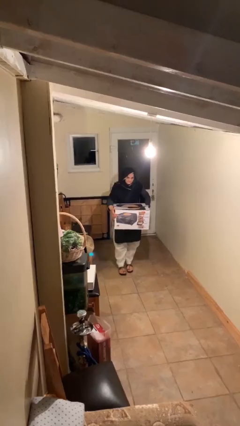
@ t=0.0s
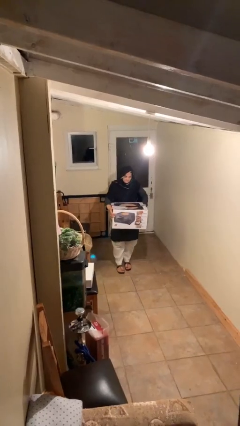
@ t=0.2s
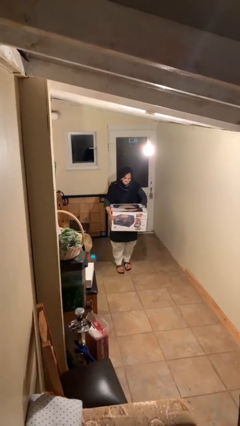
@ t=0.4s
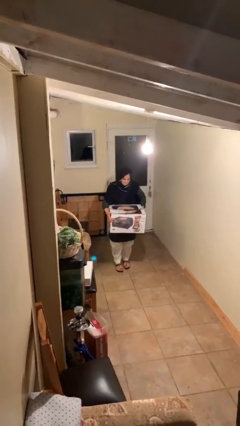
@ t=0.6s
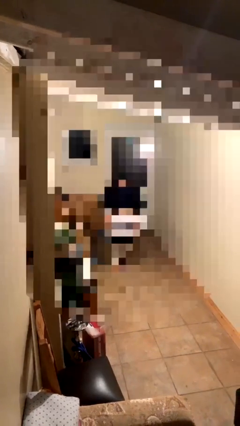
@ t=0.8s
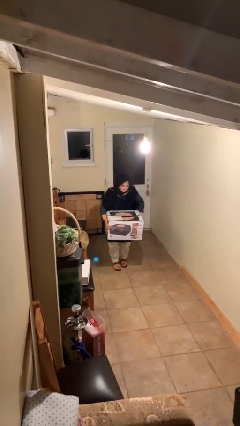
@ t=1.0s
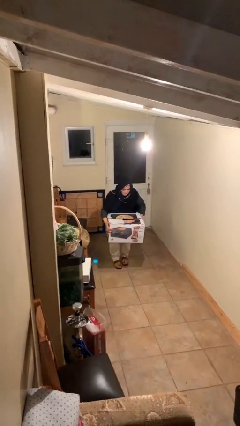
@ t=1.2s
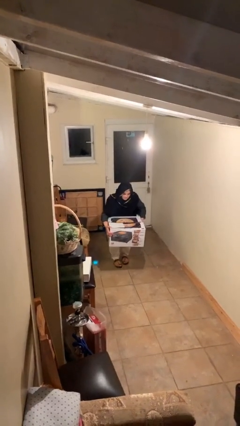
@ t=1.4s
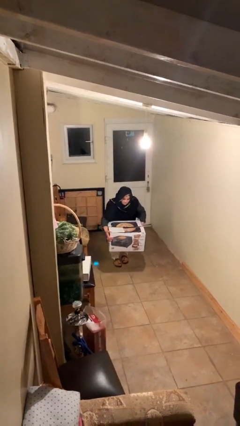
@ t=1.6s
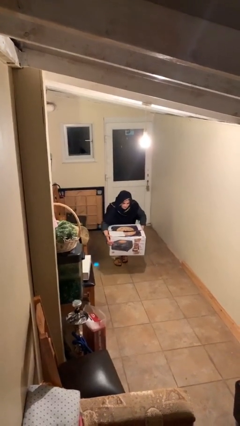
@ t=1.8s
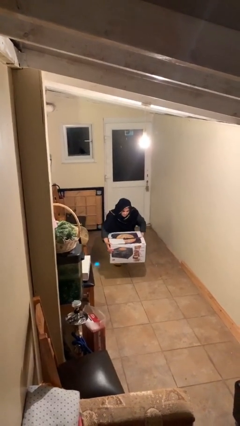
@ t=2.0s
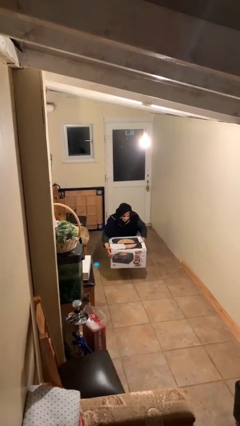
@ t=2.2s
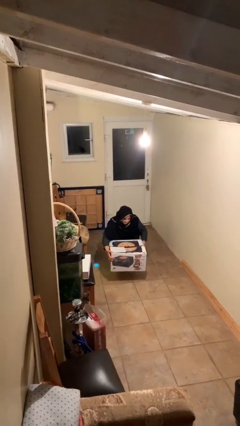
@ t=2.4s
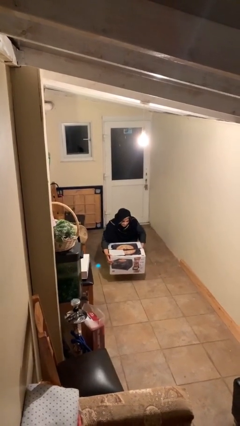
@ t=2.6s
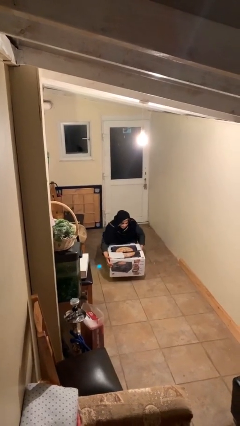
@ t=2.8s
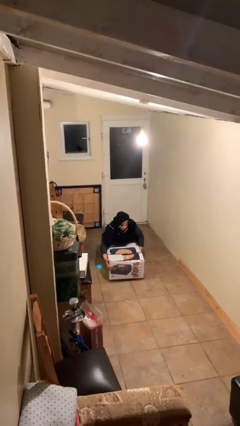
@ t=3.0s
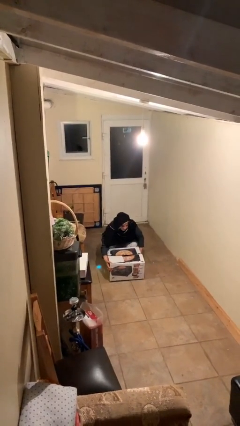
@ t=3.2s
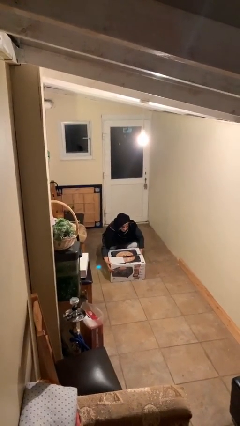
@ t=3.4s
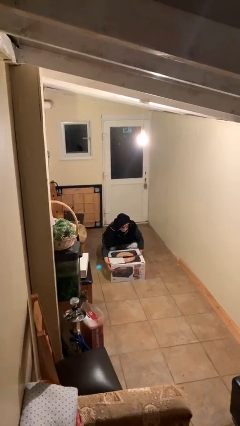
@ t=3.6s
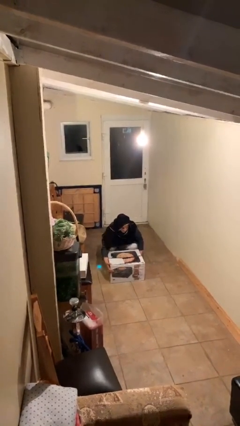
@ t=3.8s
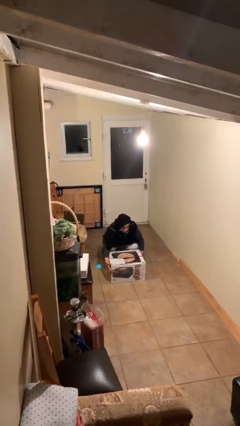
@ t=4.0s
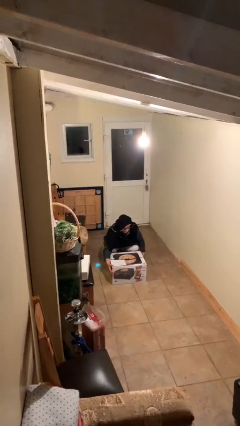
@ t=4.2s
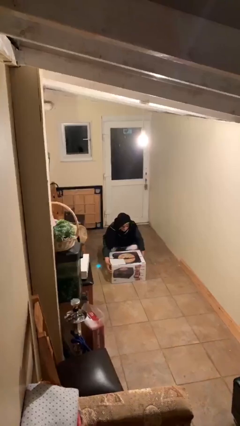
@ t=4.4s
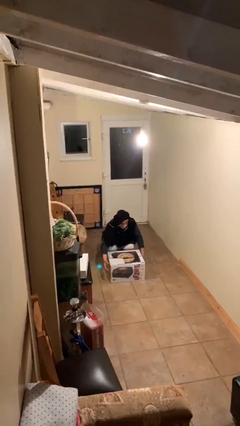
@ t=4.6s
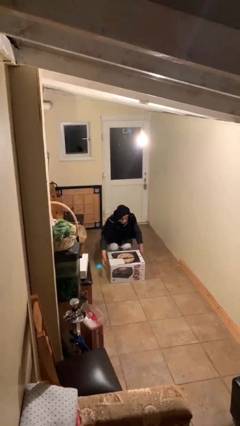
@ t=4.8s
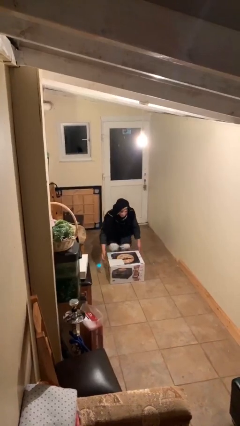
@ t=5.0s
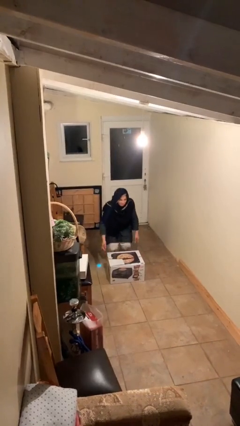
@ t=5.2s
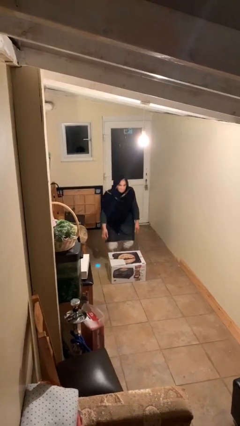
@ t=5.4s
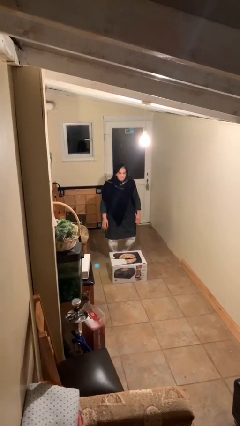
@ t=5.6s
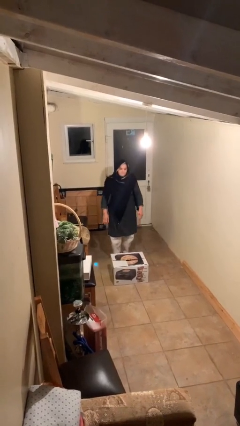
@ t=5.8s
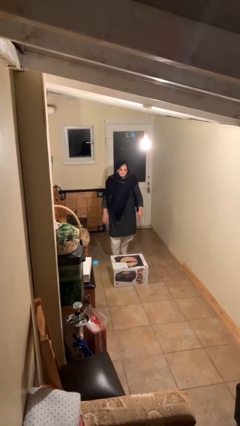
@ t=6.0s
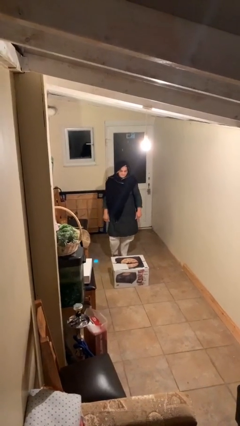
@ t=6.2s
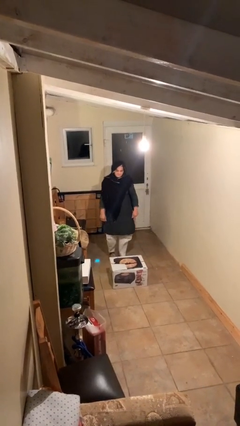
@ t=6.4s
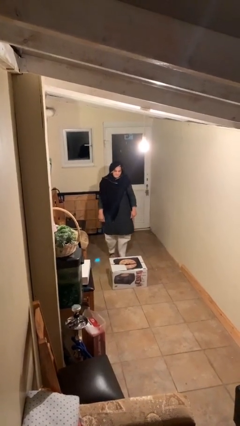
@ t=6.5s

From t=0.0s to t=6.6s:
person puts down object on floor

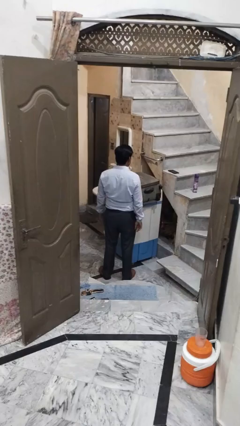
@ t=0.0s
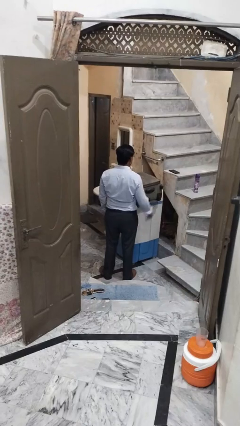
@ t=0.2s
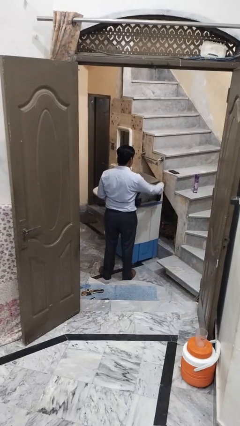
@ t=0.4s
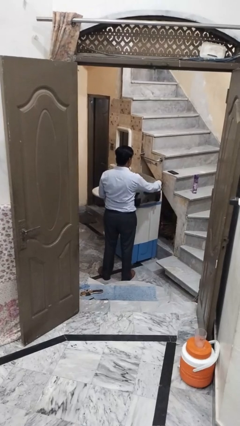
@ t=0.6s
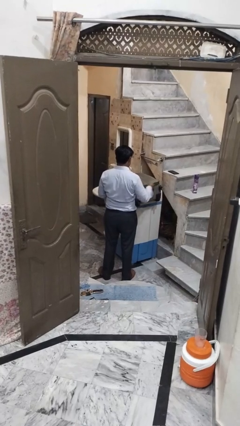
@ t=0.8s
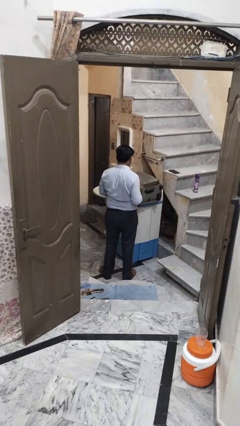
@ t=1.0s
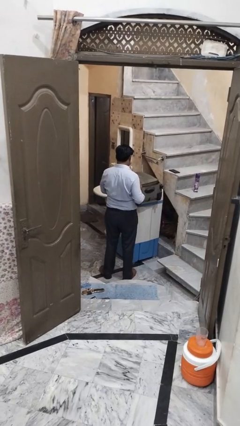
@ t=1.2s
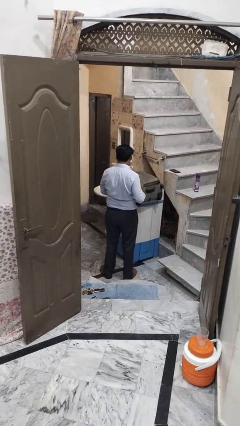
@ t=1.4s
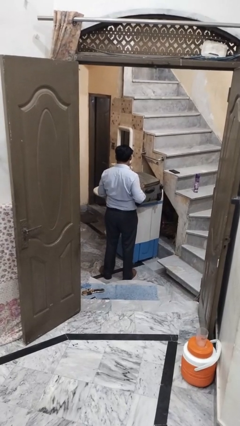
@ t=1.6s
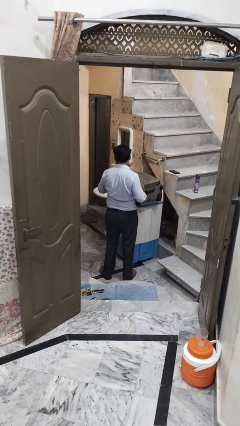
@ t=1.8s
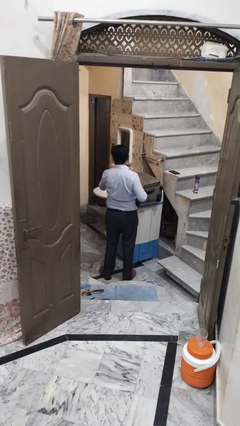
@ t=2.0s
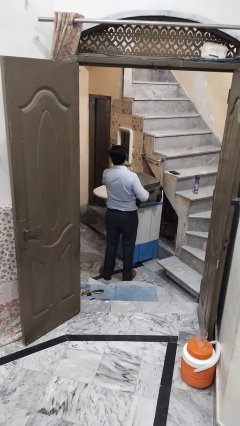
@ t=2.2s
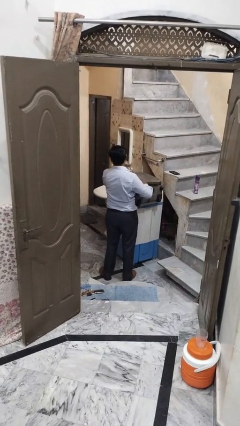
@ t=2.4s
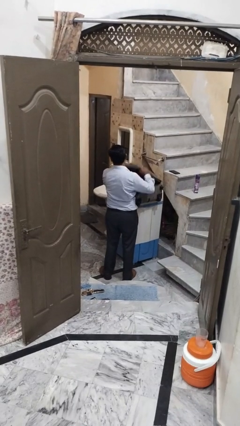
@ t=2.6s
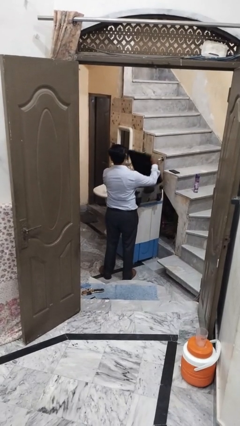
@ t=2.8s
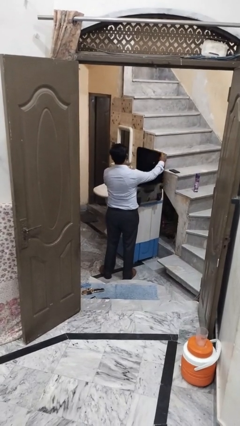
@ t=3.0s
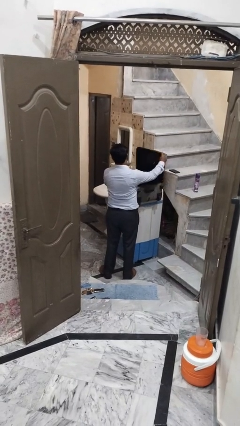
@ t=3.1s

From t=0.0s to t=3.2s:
person opens suitcase

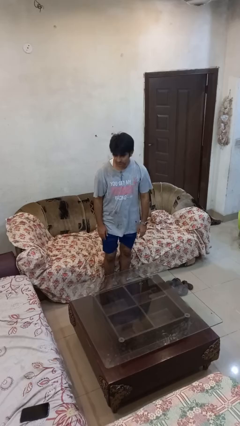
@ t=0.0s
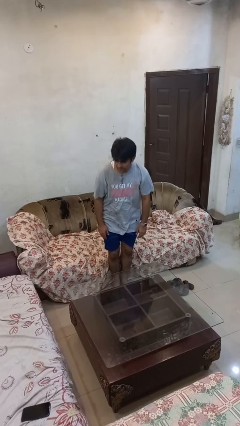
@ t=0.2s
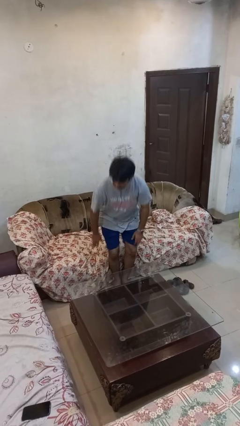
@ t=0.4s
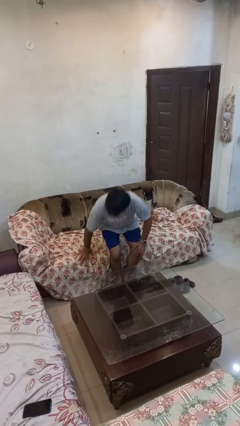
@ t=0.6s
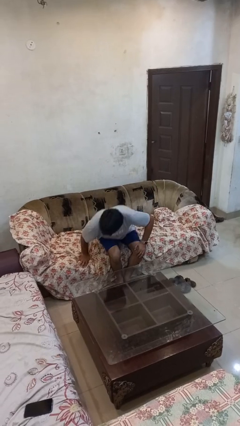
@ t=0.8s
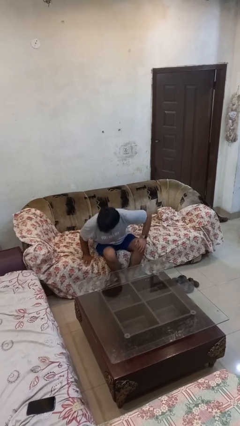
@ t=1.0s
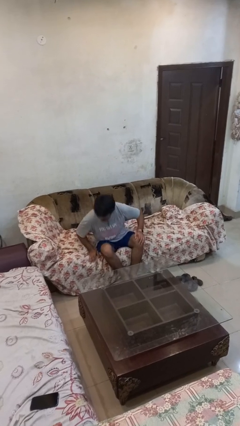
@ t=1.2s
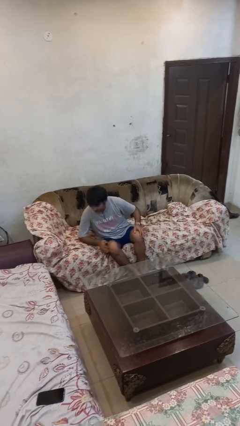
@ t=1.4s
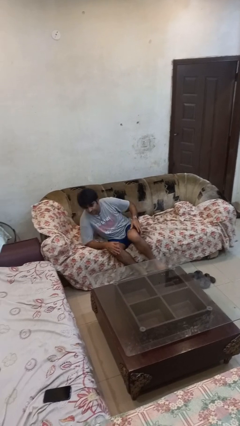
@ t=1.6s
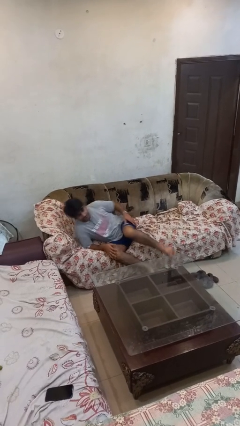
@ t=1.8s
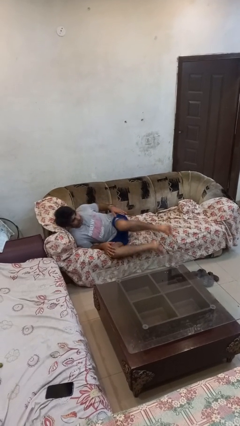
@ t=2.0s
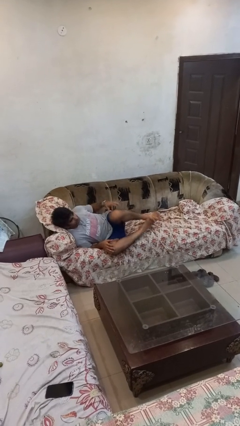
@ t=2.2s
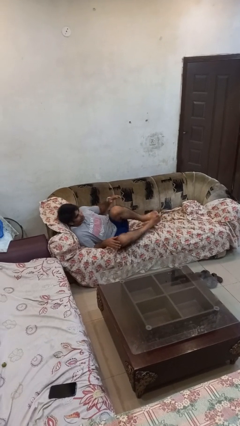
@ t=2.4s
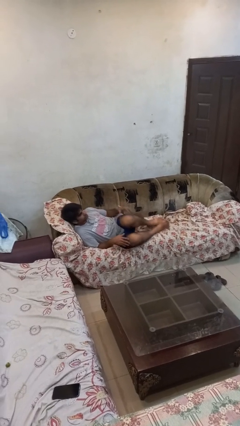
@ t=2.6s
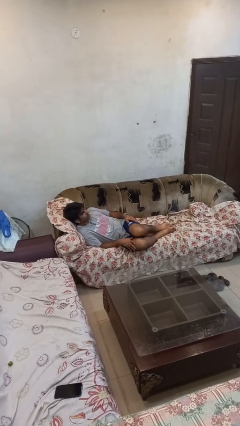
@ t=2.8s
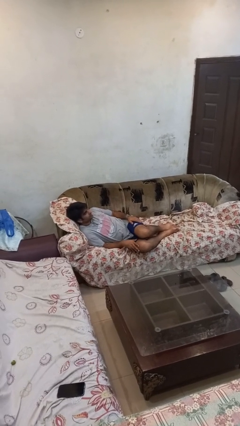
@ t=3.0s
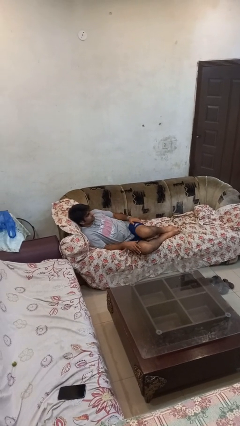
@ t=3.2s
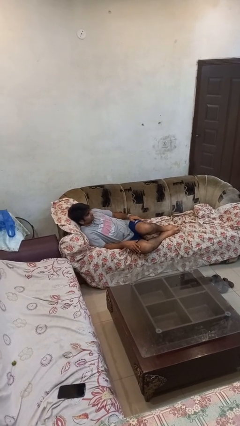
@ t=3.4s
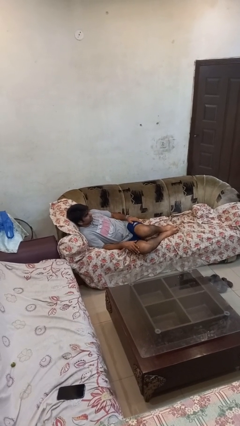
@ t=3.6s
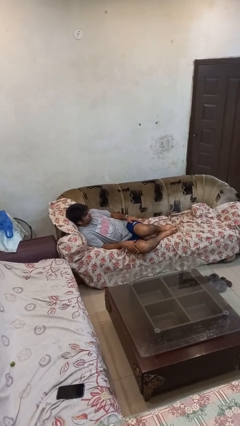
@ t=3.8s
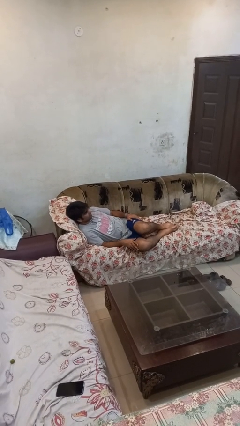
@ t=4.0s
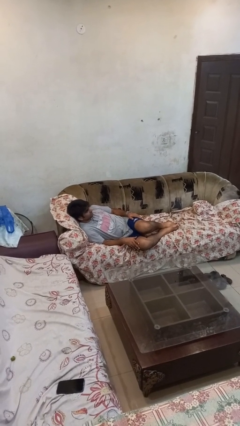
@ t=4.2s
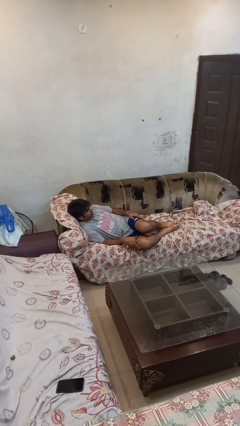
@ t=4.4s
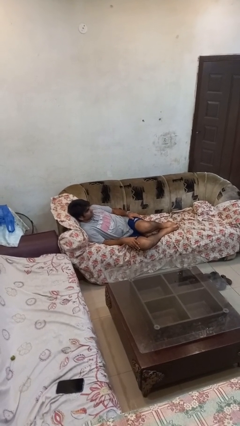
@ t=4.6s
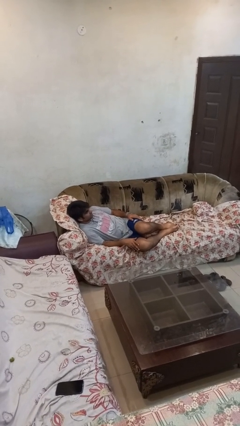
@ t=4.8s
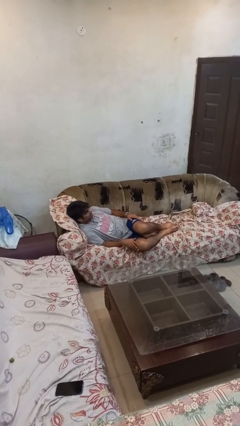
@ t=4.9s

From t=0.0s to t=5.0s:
person lies down on couch

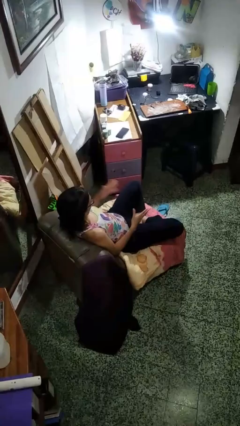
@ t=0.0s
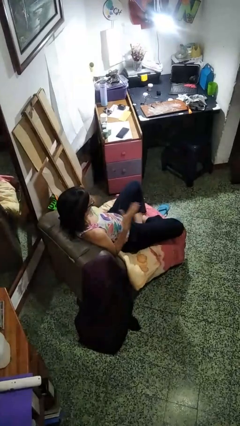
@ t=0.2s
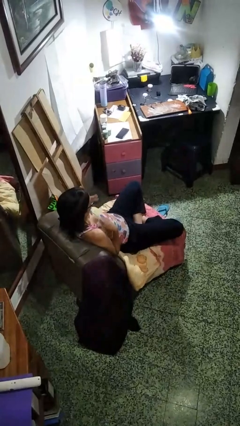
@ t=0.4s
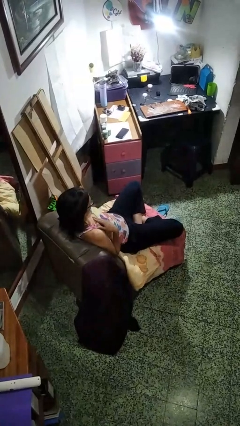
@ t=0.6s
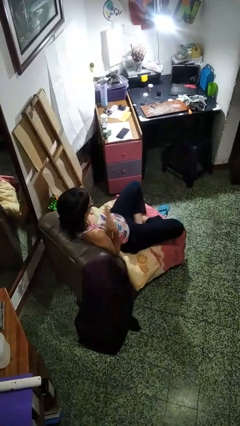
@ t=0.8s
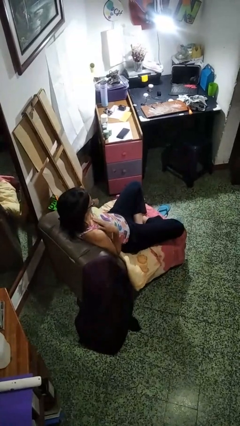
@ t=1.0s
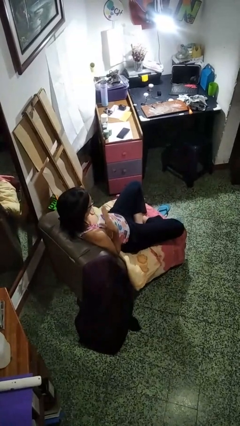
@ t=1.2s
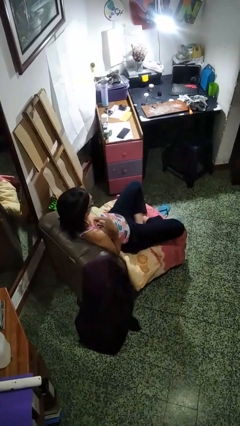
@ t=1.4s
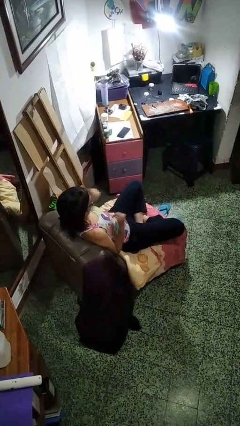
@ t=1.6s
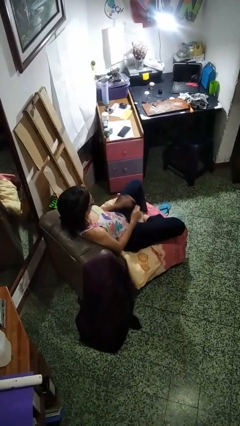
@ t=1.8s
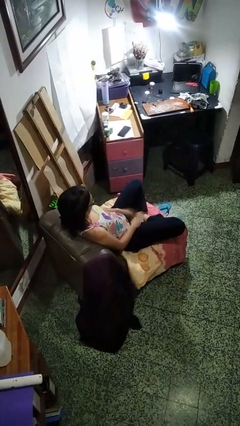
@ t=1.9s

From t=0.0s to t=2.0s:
person drums on chest

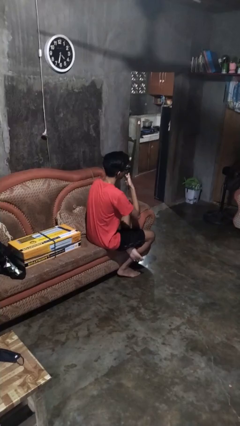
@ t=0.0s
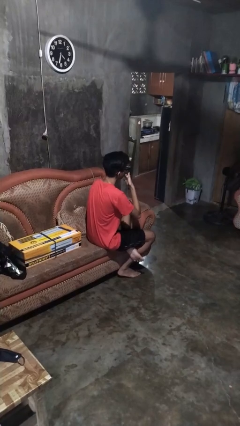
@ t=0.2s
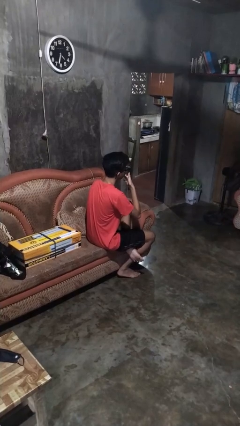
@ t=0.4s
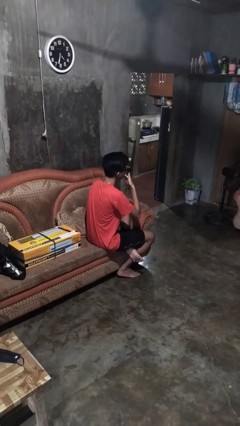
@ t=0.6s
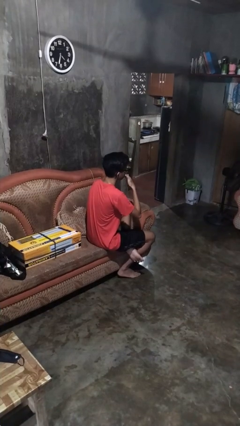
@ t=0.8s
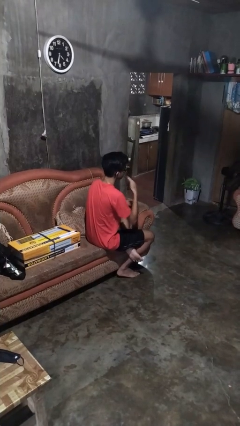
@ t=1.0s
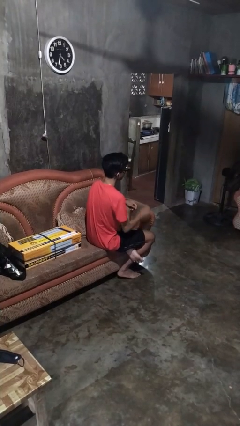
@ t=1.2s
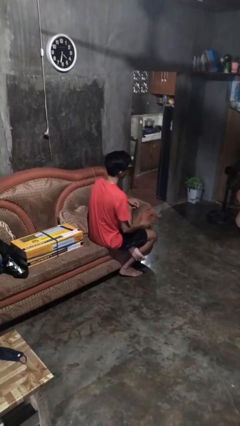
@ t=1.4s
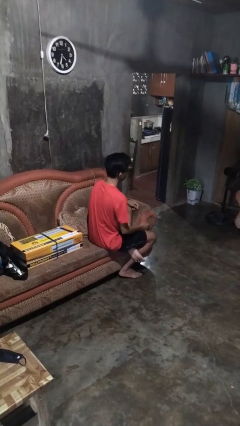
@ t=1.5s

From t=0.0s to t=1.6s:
person licks fingers
